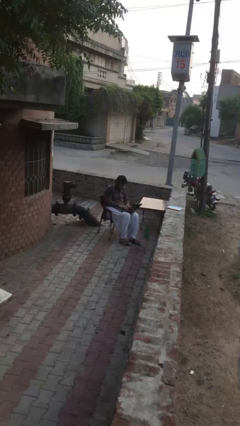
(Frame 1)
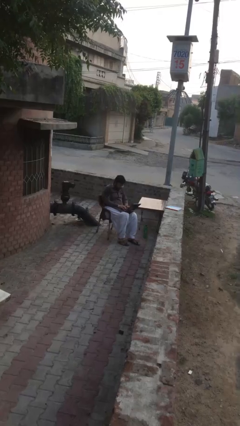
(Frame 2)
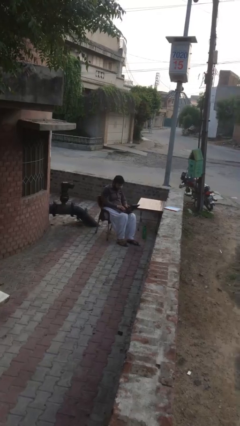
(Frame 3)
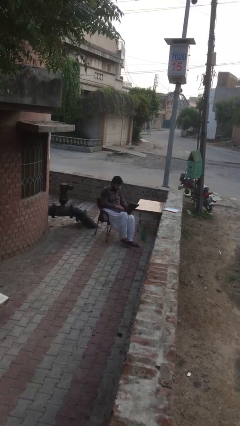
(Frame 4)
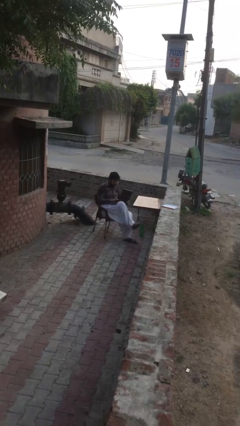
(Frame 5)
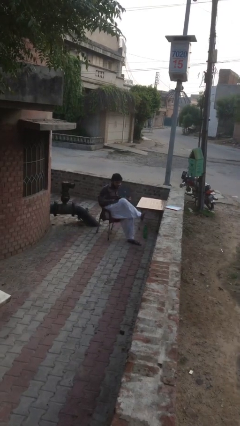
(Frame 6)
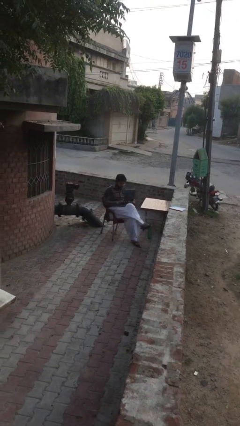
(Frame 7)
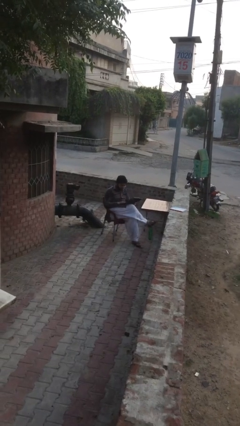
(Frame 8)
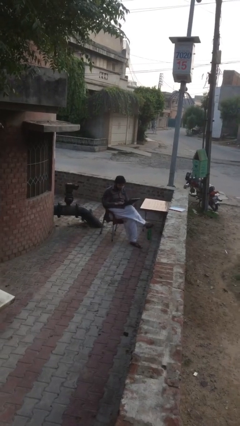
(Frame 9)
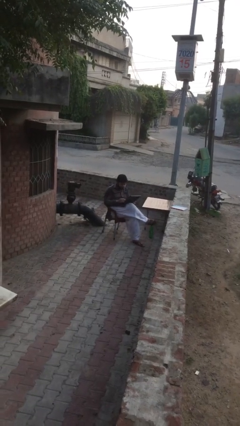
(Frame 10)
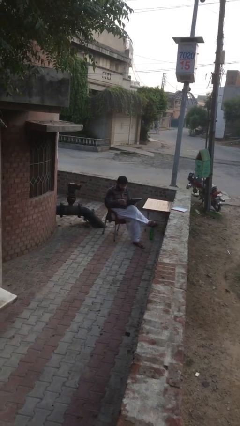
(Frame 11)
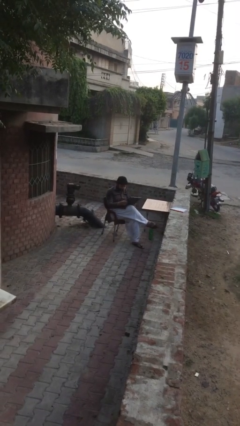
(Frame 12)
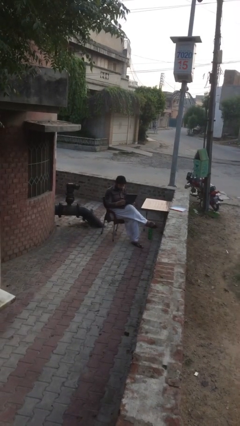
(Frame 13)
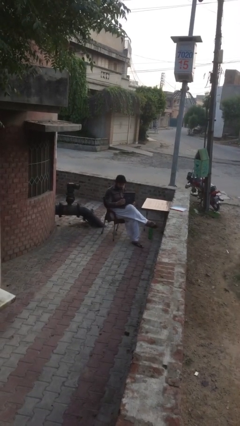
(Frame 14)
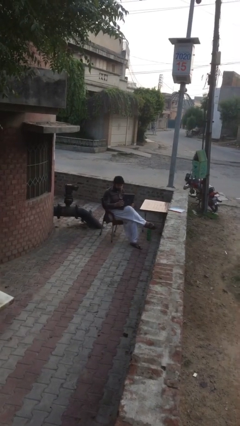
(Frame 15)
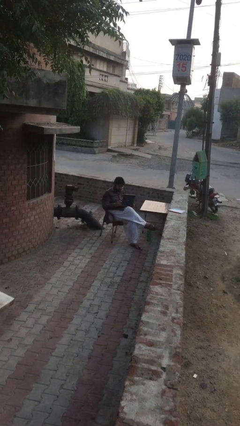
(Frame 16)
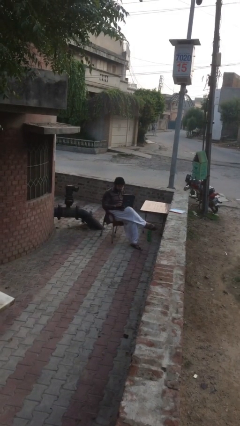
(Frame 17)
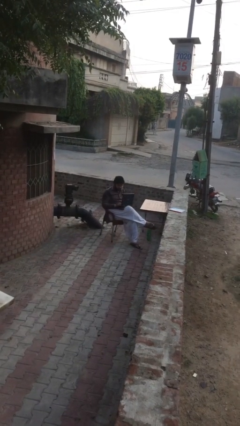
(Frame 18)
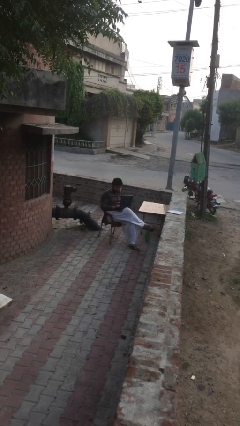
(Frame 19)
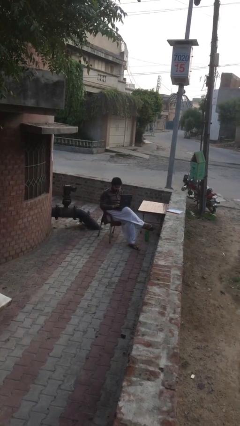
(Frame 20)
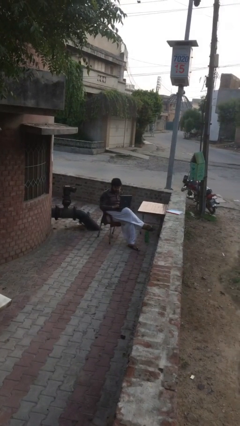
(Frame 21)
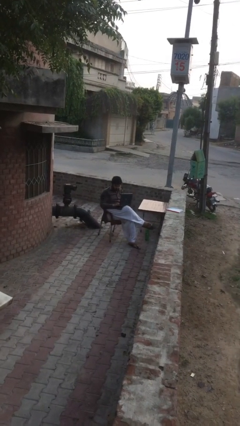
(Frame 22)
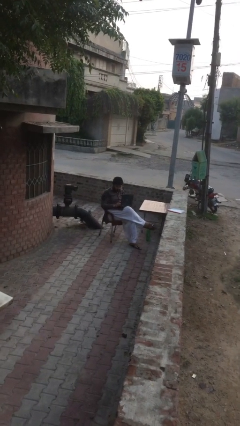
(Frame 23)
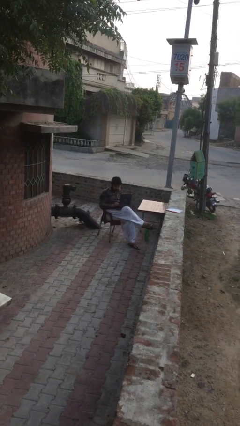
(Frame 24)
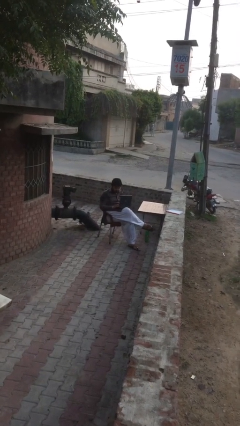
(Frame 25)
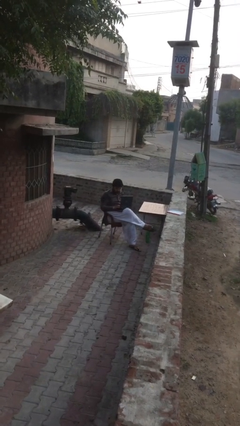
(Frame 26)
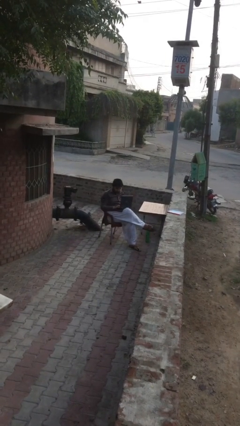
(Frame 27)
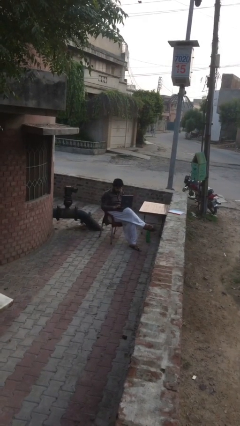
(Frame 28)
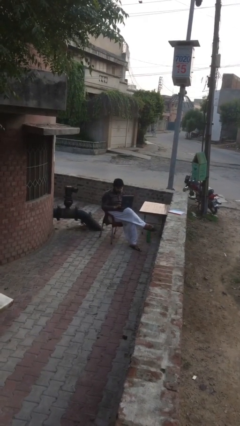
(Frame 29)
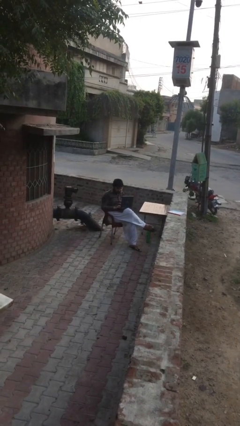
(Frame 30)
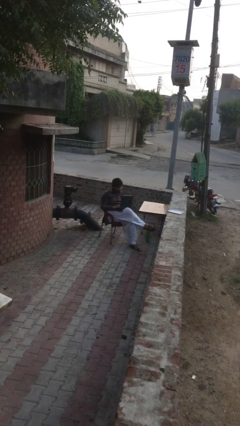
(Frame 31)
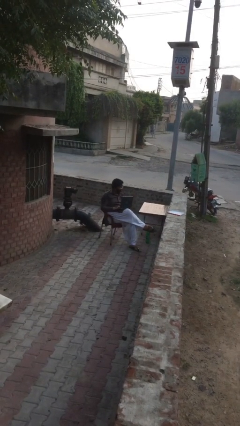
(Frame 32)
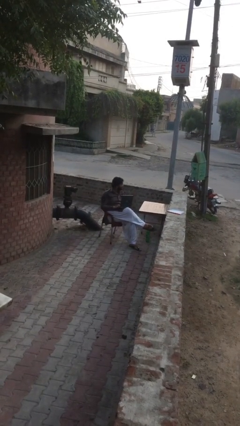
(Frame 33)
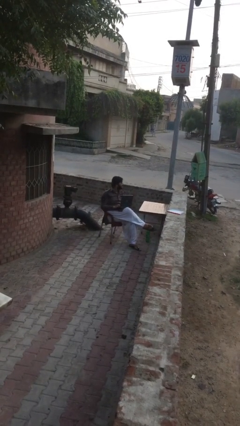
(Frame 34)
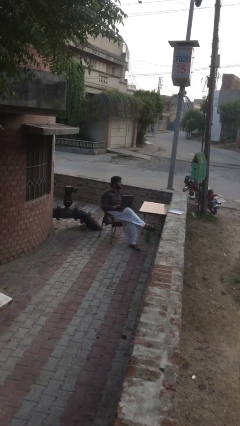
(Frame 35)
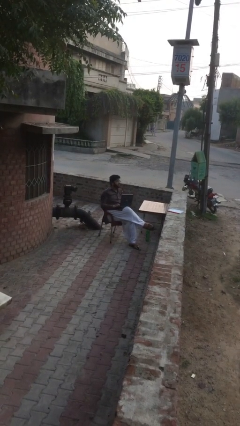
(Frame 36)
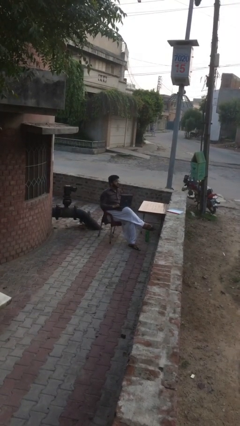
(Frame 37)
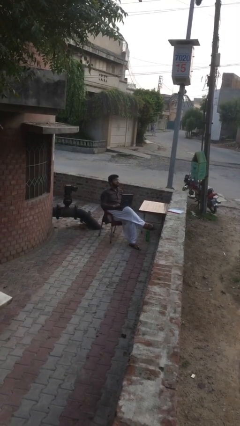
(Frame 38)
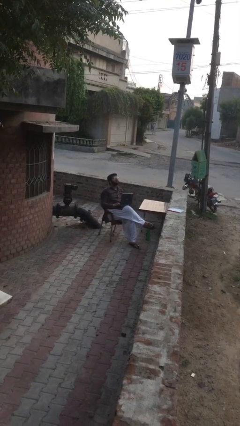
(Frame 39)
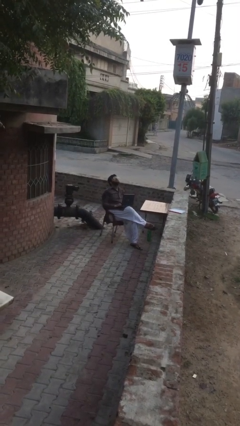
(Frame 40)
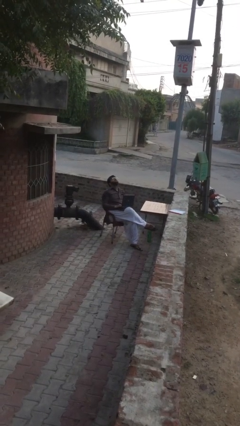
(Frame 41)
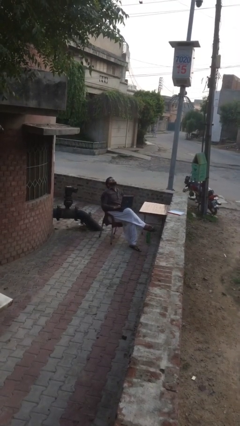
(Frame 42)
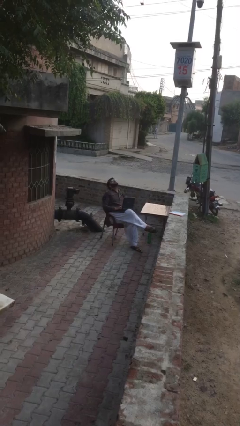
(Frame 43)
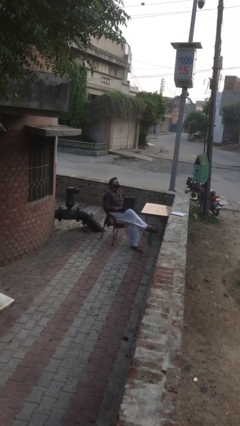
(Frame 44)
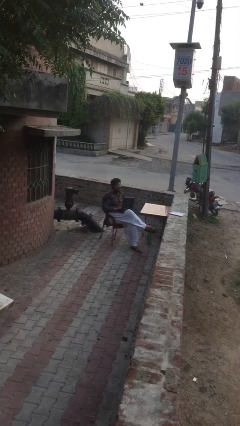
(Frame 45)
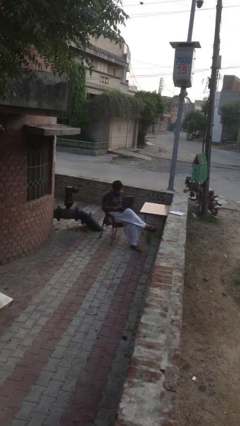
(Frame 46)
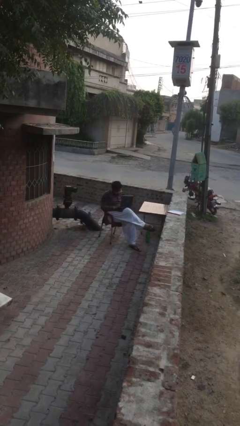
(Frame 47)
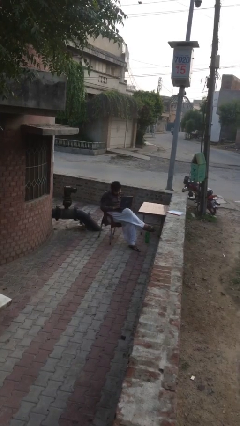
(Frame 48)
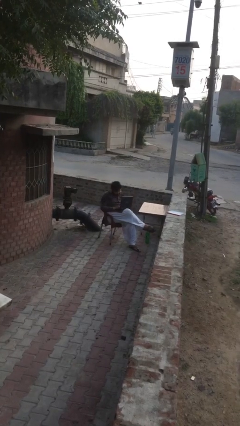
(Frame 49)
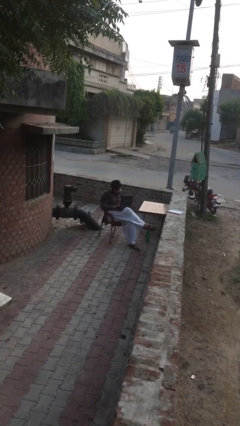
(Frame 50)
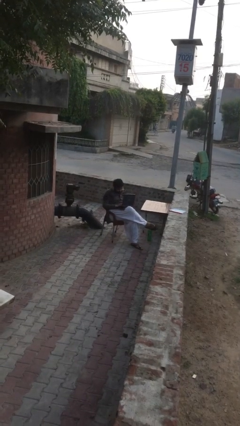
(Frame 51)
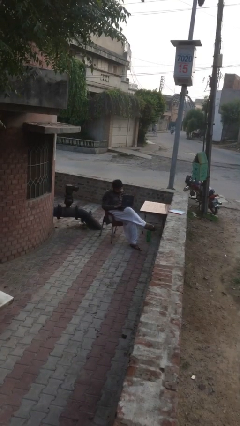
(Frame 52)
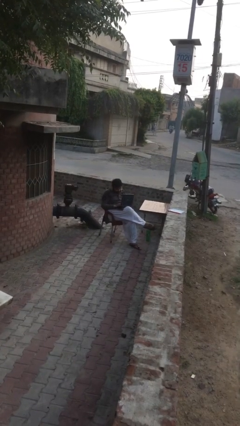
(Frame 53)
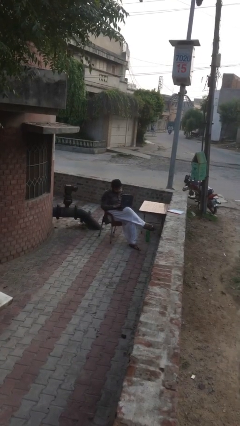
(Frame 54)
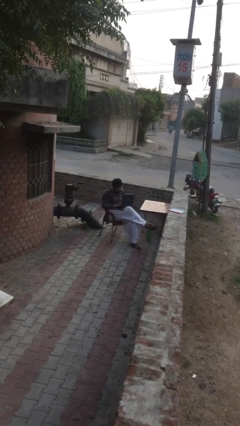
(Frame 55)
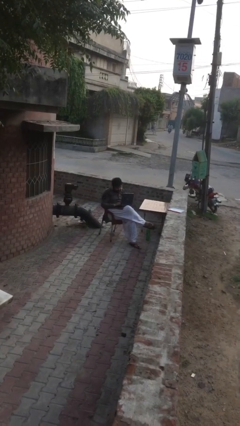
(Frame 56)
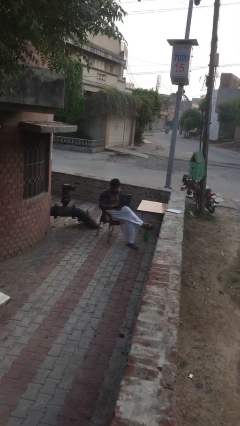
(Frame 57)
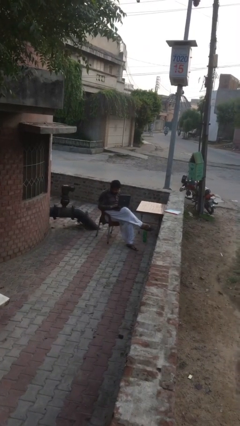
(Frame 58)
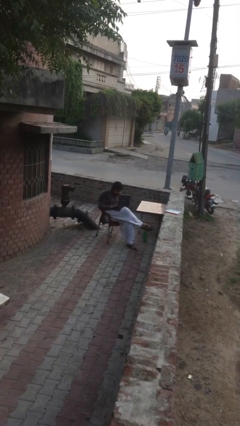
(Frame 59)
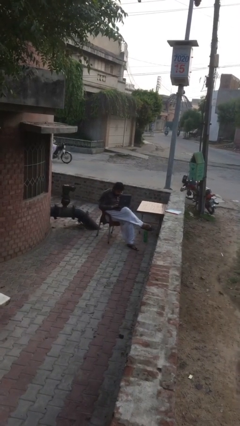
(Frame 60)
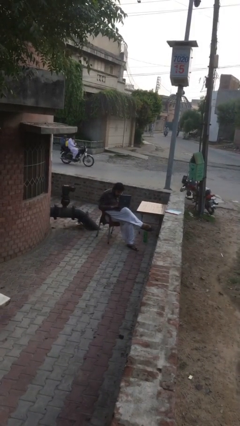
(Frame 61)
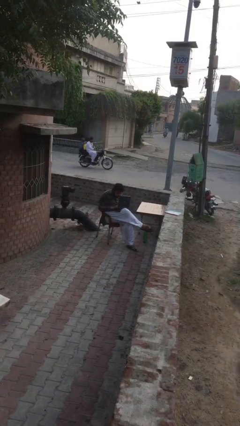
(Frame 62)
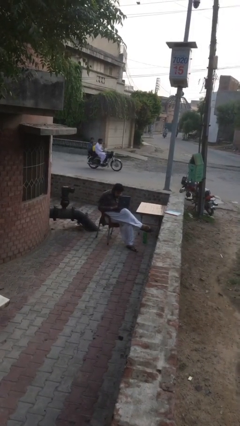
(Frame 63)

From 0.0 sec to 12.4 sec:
person interacts with laptop

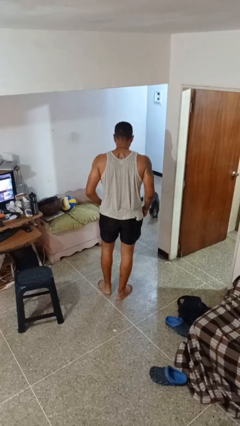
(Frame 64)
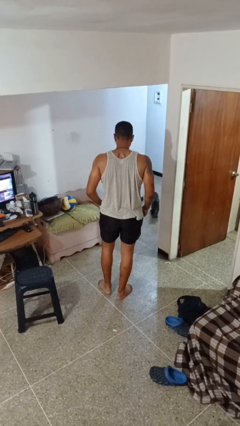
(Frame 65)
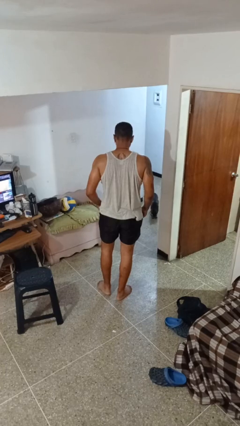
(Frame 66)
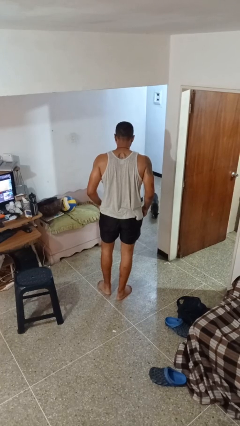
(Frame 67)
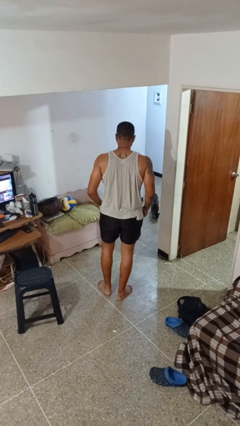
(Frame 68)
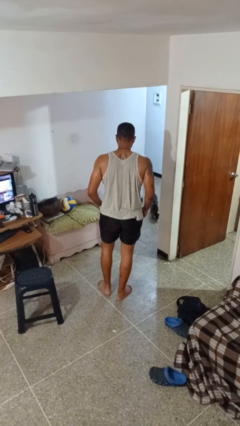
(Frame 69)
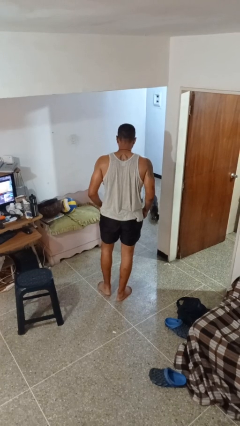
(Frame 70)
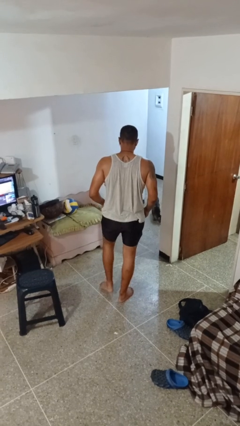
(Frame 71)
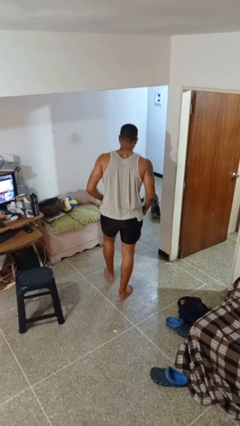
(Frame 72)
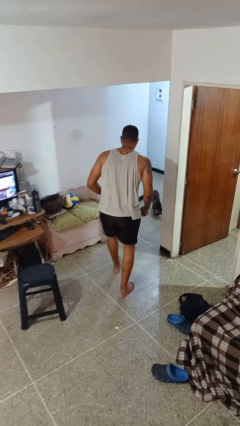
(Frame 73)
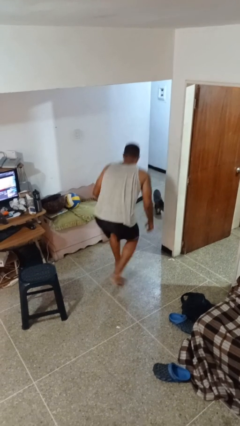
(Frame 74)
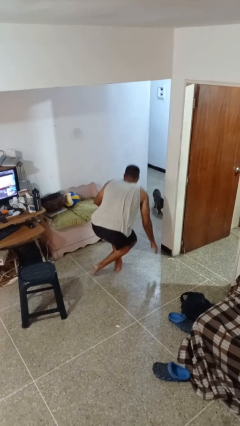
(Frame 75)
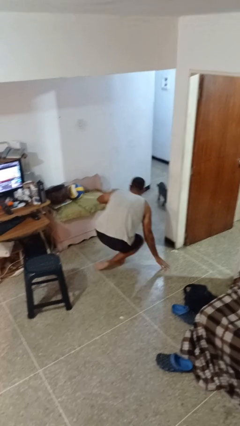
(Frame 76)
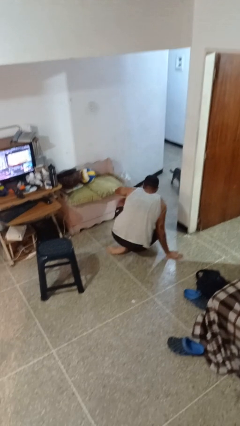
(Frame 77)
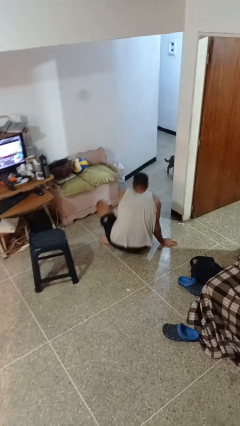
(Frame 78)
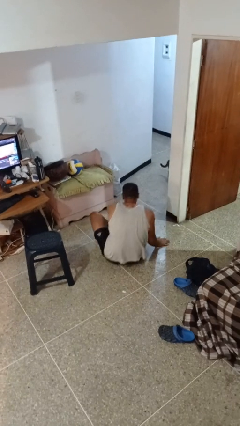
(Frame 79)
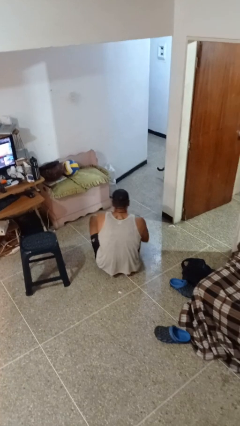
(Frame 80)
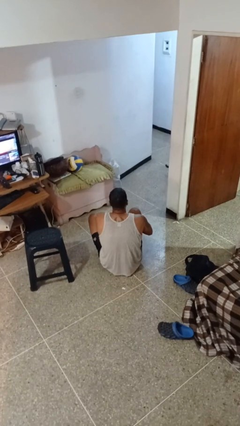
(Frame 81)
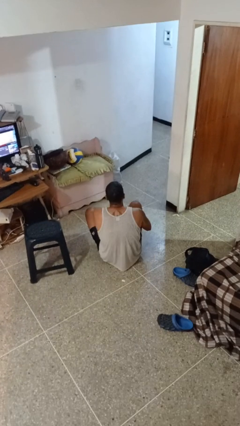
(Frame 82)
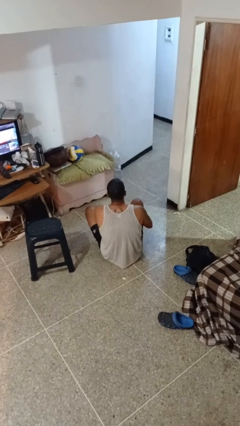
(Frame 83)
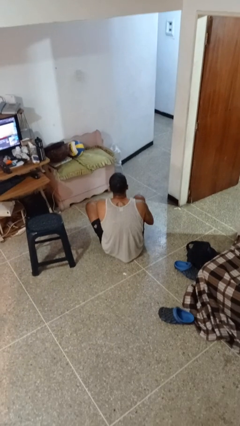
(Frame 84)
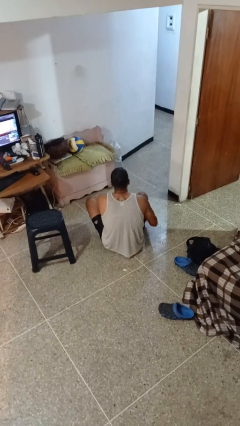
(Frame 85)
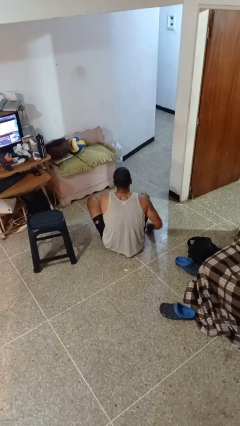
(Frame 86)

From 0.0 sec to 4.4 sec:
person sits crisscross

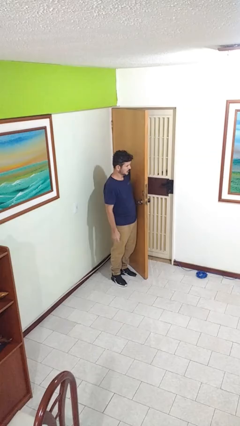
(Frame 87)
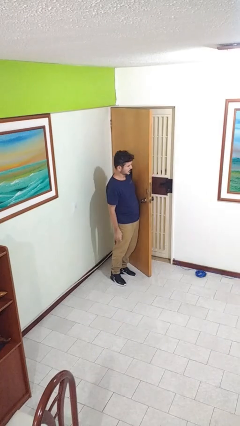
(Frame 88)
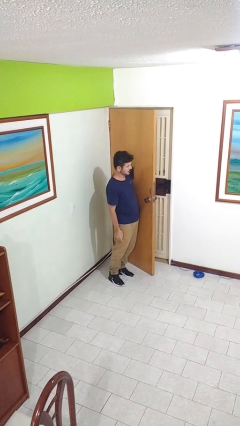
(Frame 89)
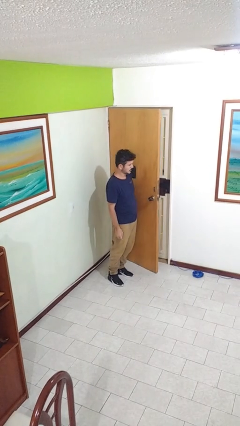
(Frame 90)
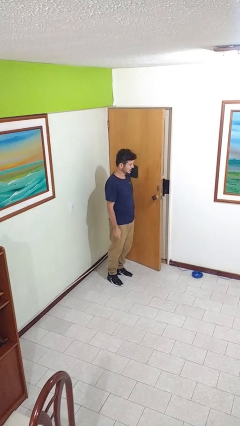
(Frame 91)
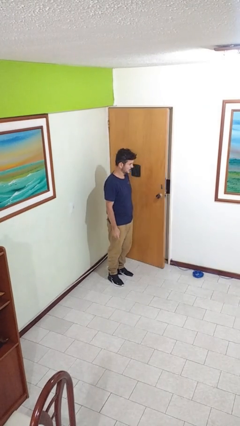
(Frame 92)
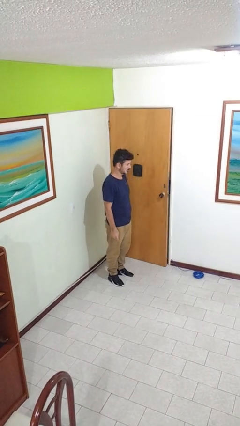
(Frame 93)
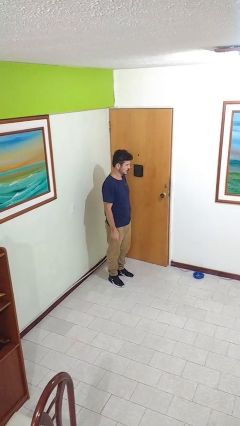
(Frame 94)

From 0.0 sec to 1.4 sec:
person closes door with hip
